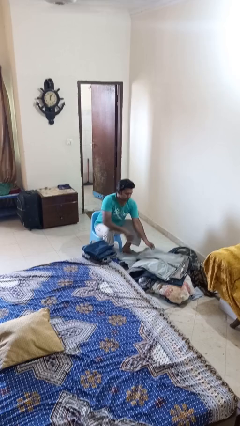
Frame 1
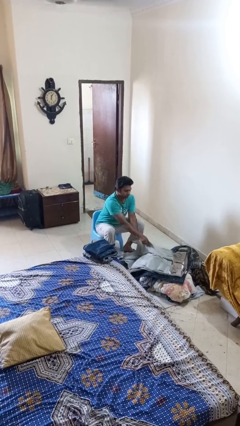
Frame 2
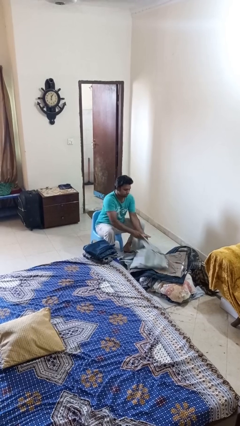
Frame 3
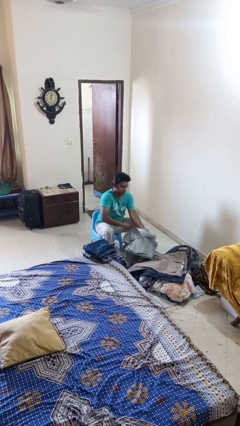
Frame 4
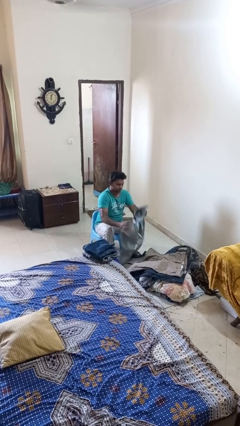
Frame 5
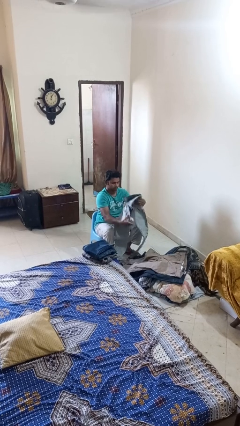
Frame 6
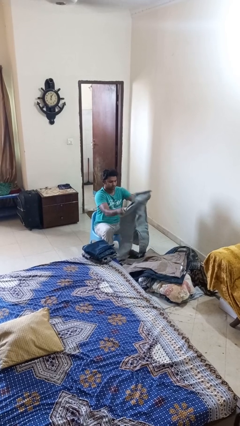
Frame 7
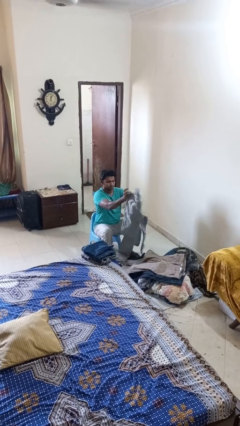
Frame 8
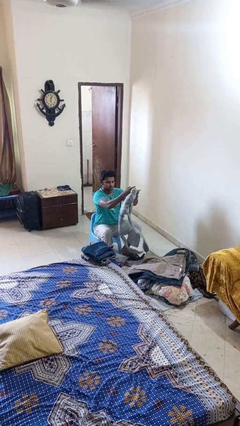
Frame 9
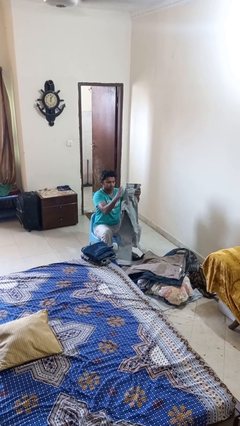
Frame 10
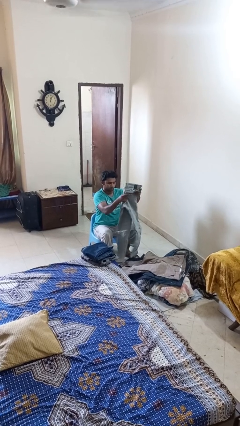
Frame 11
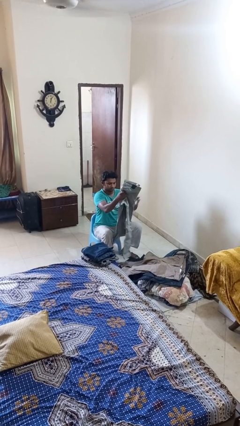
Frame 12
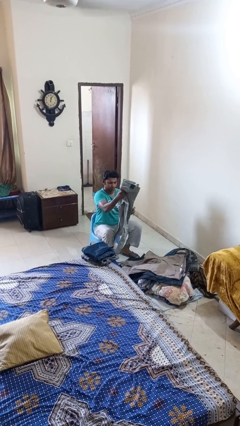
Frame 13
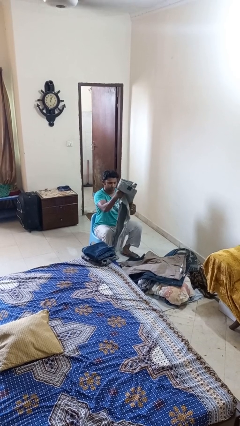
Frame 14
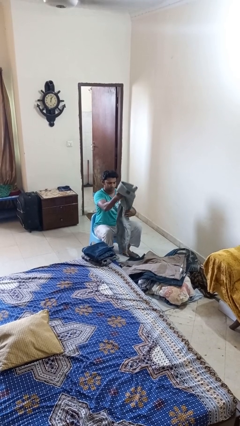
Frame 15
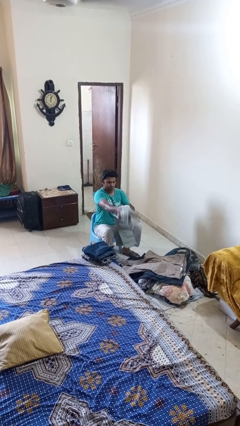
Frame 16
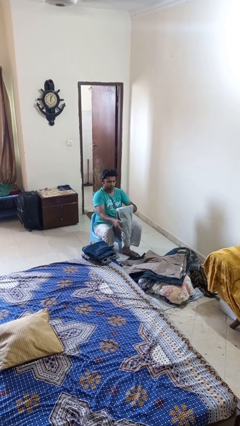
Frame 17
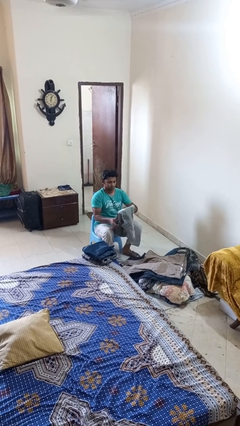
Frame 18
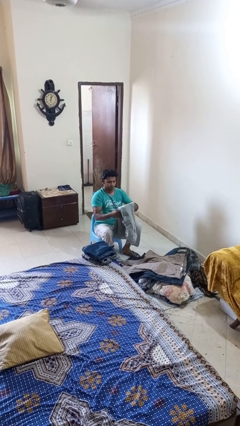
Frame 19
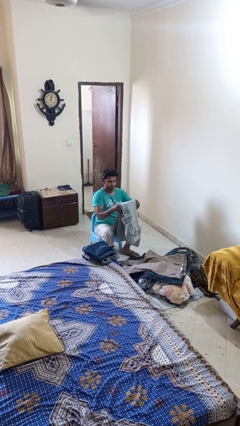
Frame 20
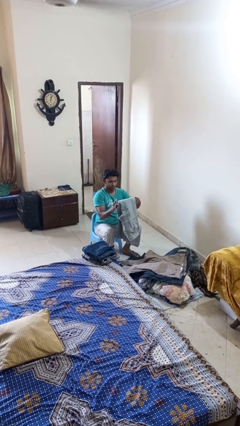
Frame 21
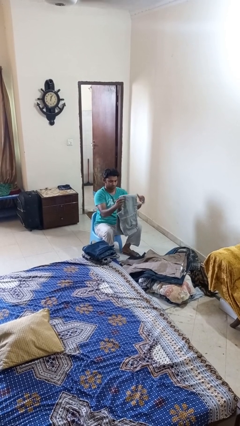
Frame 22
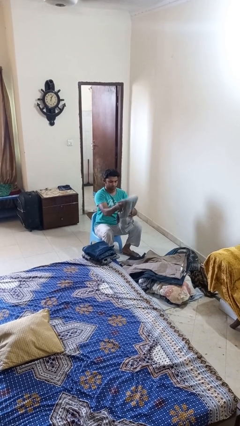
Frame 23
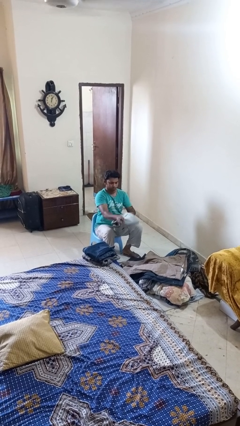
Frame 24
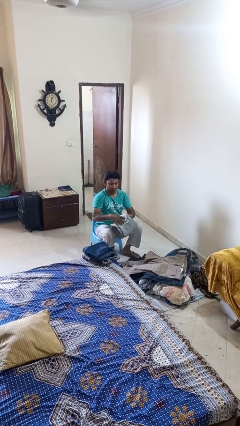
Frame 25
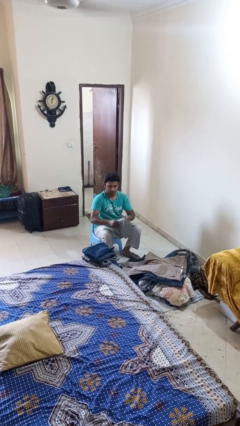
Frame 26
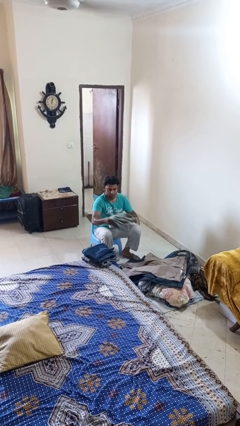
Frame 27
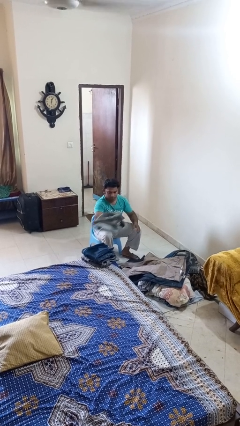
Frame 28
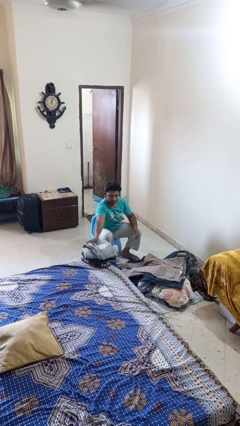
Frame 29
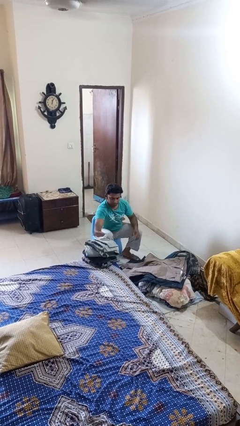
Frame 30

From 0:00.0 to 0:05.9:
person folds pants

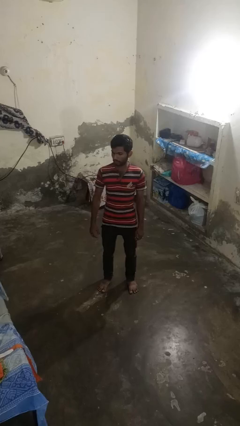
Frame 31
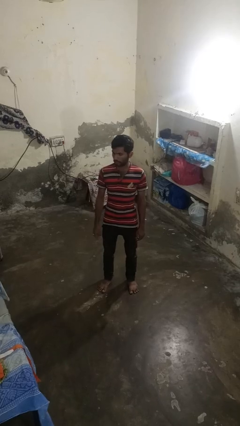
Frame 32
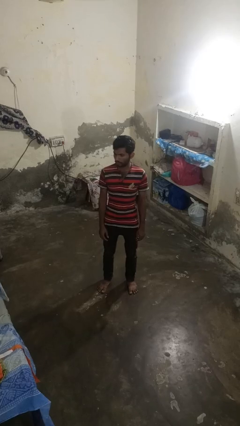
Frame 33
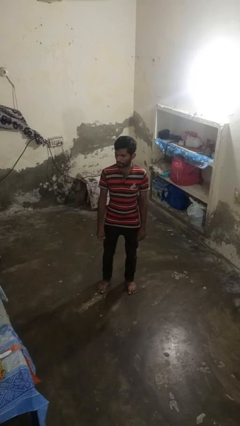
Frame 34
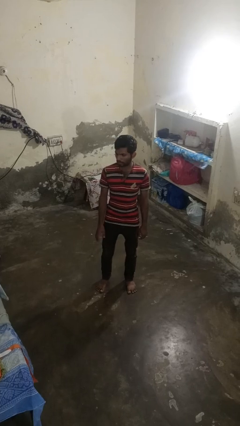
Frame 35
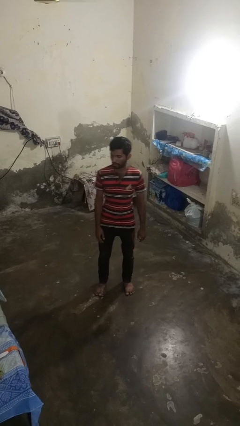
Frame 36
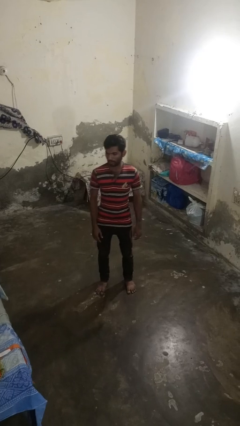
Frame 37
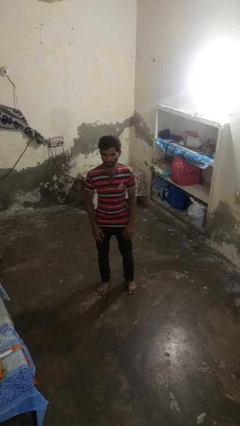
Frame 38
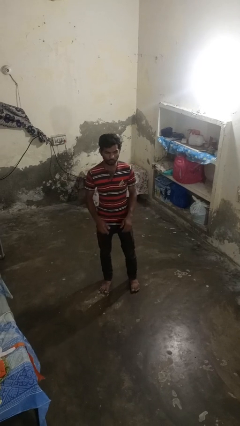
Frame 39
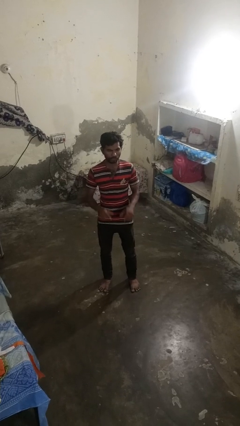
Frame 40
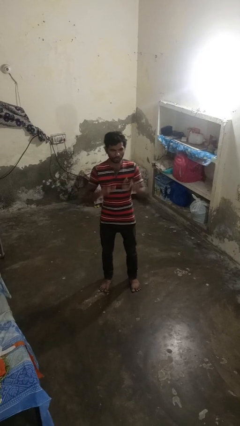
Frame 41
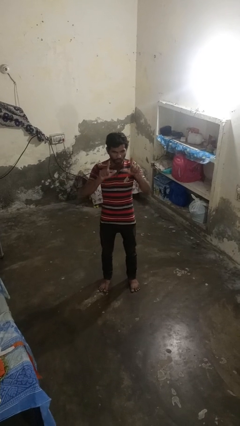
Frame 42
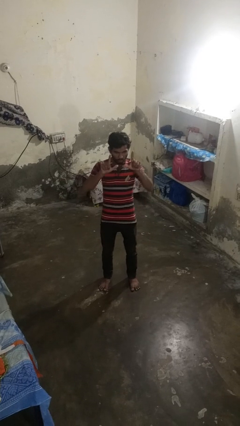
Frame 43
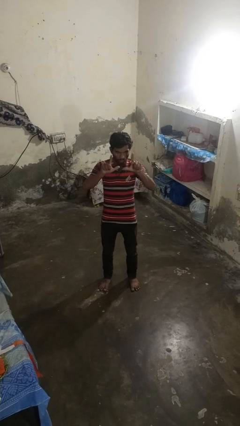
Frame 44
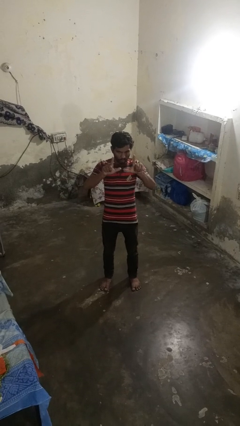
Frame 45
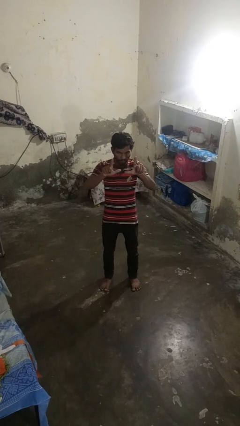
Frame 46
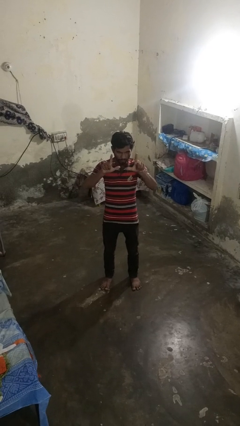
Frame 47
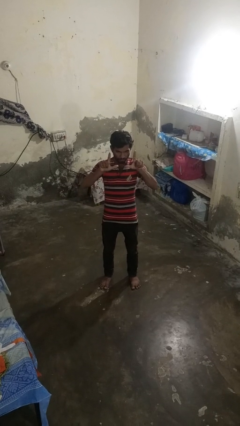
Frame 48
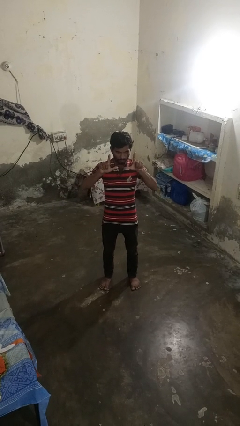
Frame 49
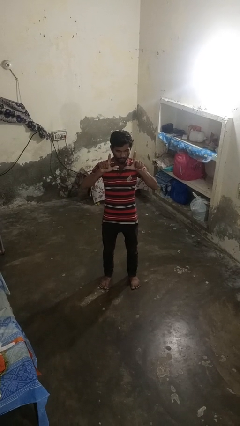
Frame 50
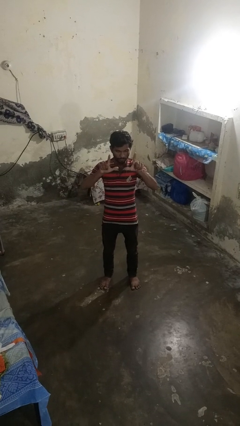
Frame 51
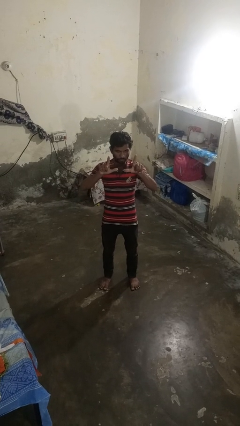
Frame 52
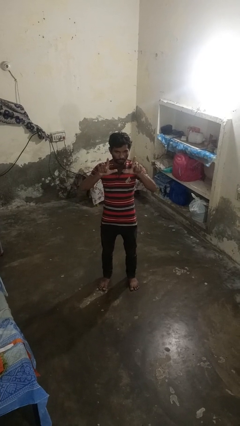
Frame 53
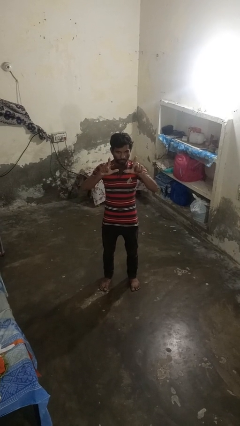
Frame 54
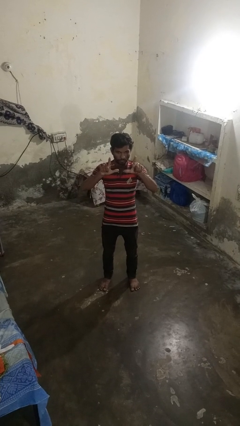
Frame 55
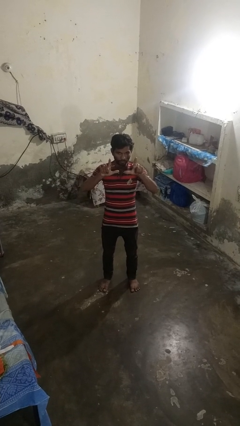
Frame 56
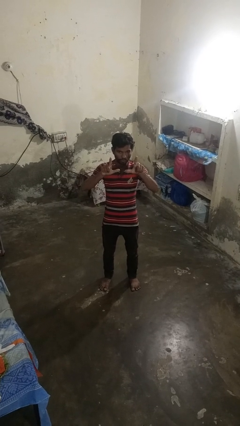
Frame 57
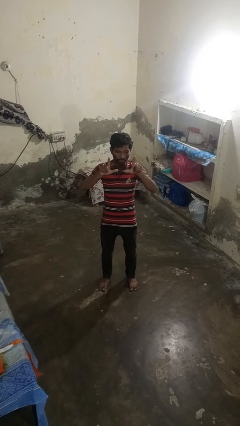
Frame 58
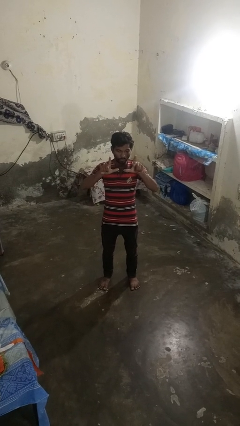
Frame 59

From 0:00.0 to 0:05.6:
person gestures zoom in

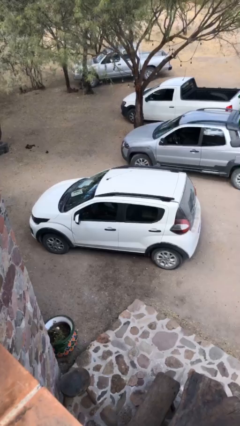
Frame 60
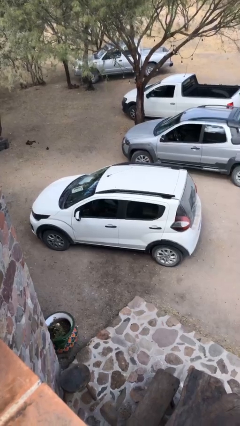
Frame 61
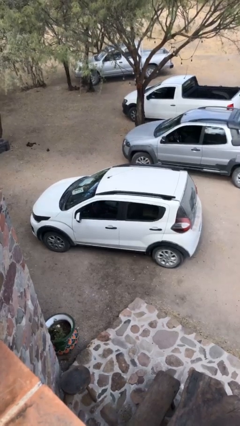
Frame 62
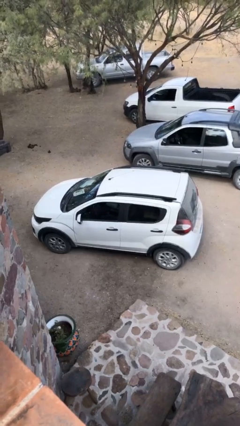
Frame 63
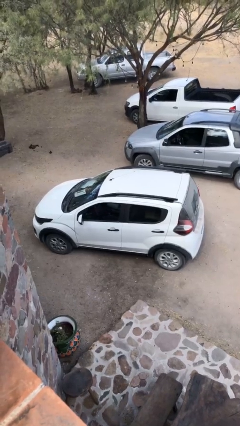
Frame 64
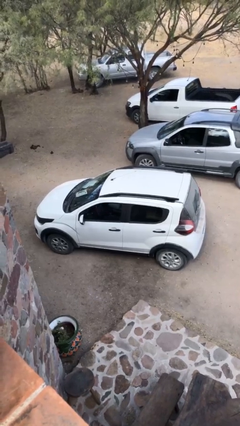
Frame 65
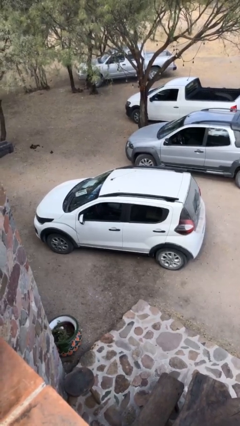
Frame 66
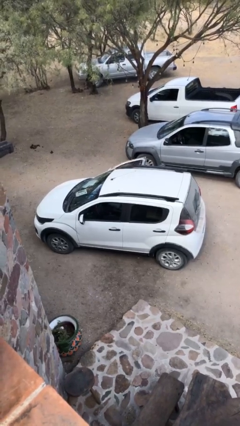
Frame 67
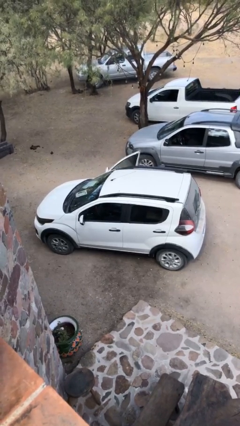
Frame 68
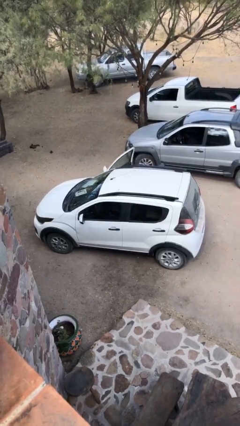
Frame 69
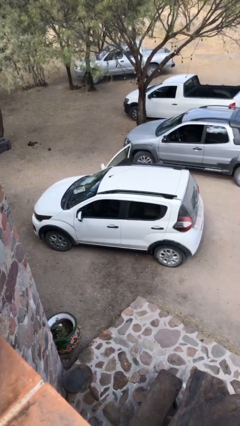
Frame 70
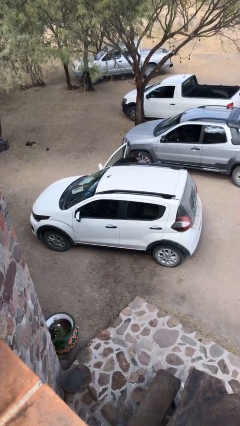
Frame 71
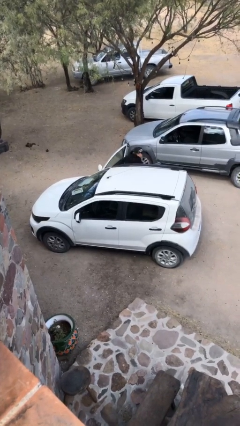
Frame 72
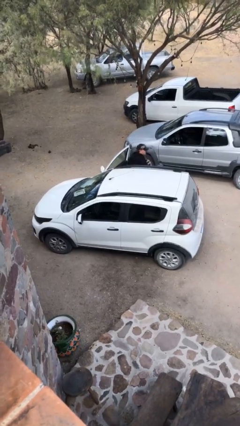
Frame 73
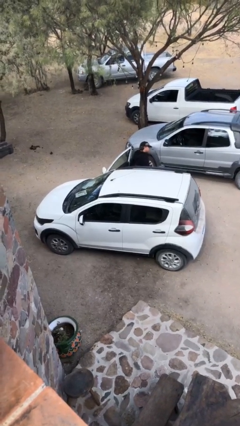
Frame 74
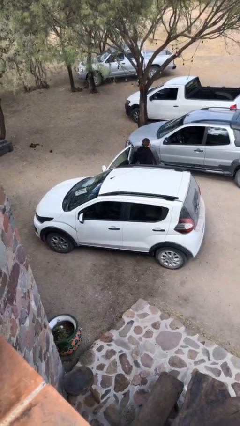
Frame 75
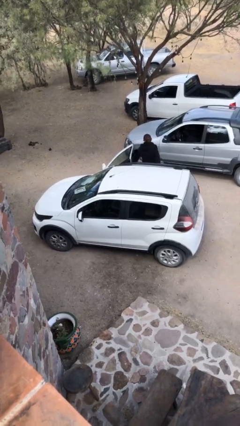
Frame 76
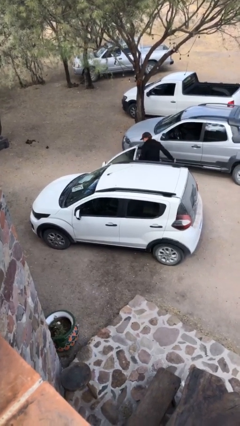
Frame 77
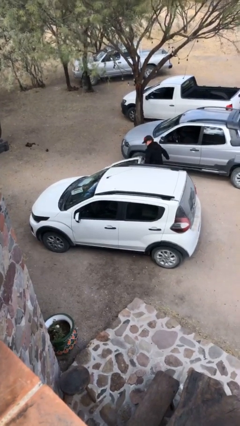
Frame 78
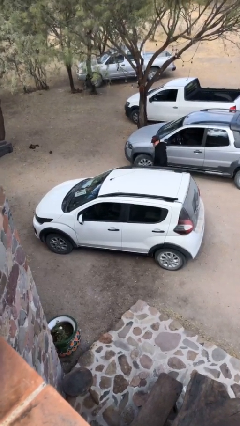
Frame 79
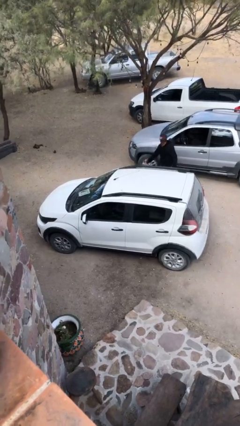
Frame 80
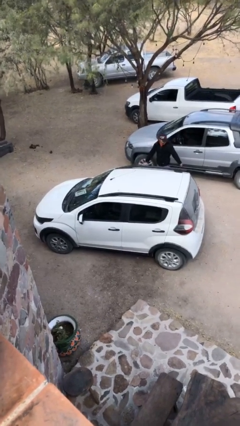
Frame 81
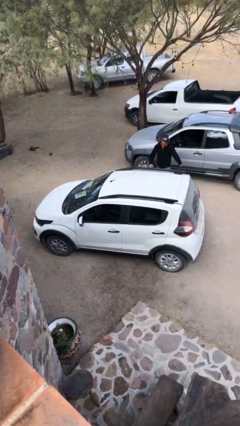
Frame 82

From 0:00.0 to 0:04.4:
car drops off person

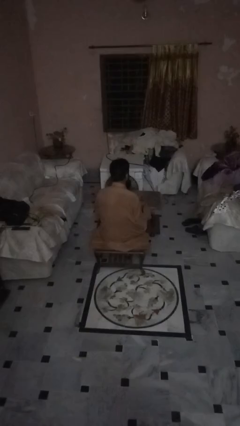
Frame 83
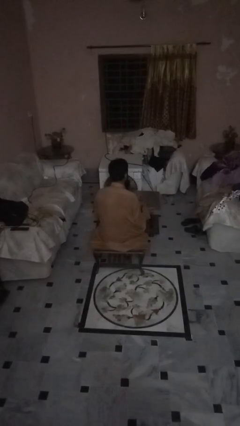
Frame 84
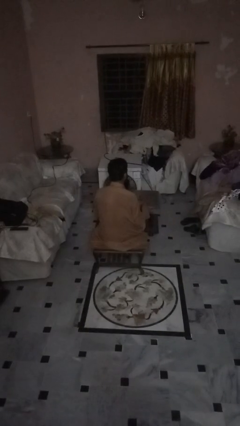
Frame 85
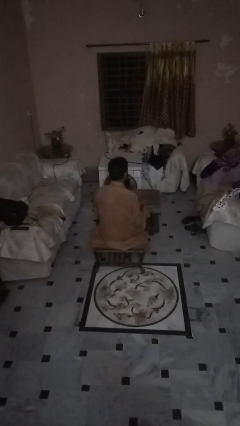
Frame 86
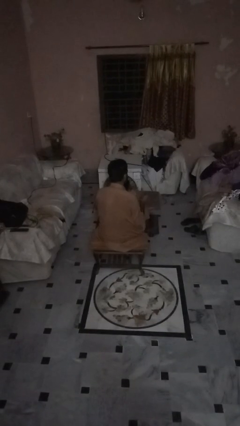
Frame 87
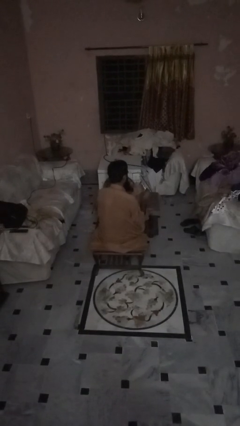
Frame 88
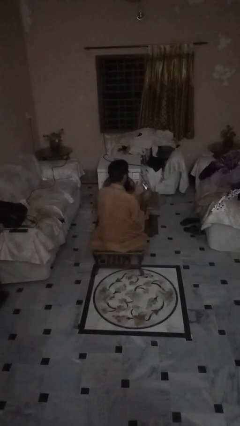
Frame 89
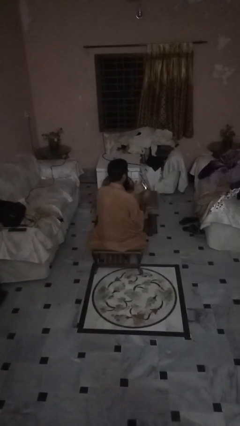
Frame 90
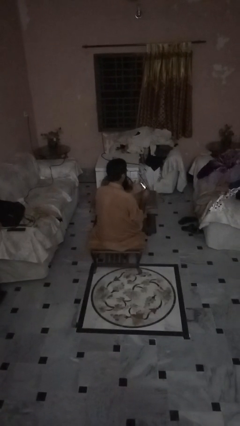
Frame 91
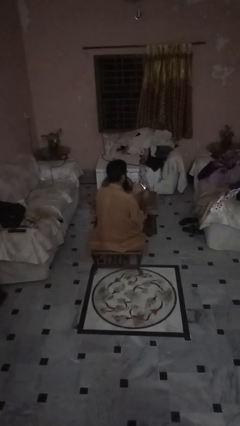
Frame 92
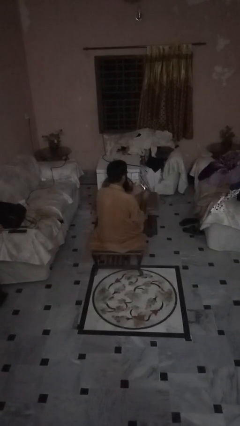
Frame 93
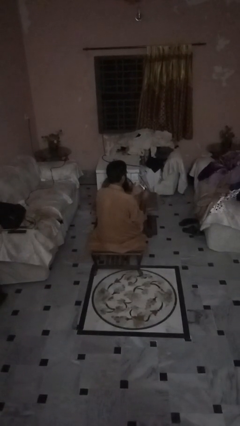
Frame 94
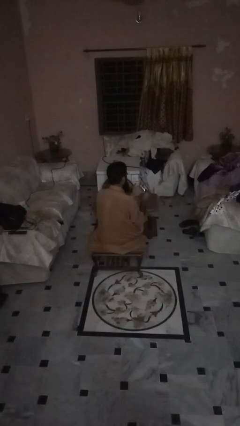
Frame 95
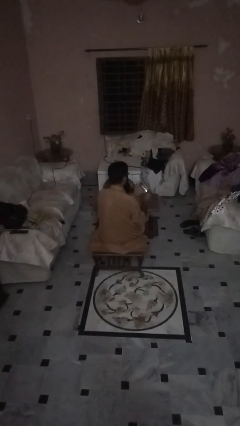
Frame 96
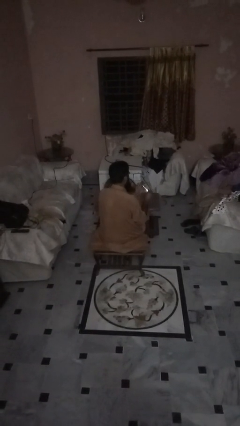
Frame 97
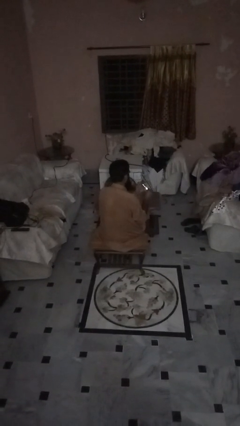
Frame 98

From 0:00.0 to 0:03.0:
person files fingernails
